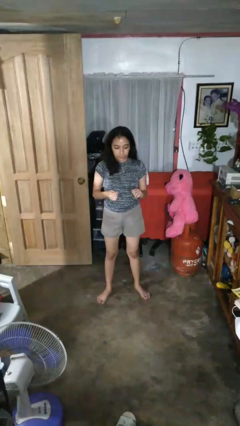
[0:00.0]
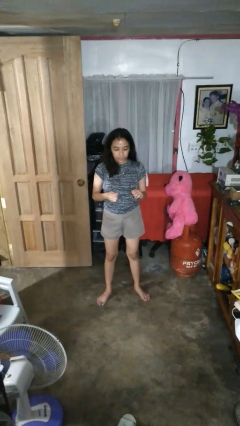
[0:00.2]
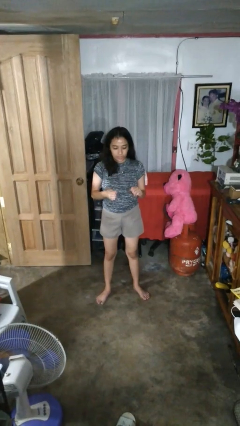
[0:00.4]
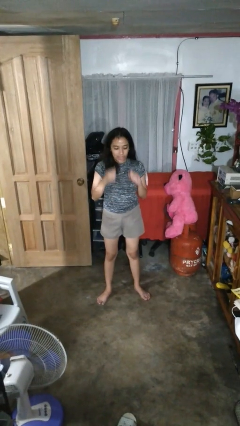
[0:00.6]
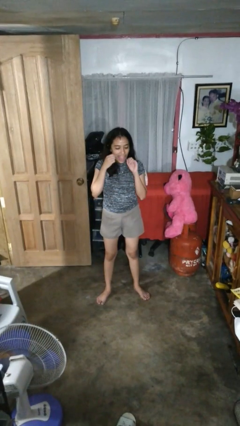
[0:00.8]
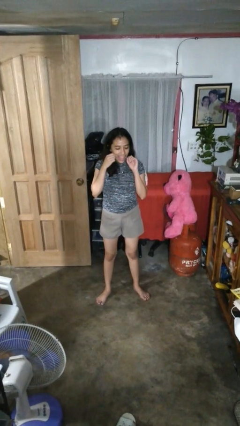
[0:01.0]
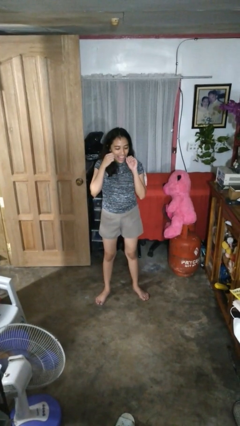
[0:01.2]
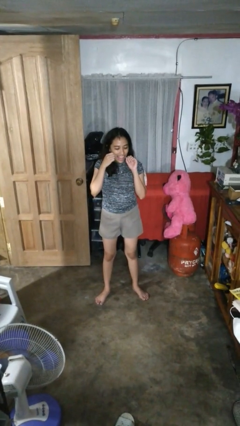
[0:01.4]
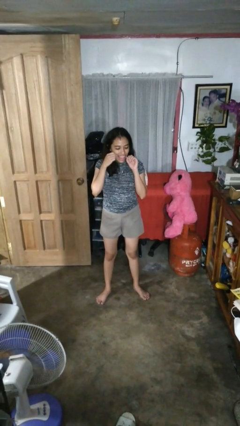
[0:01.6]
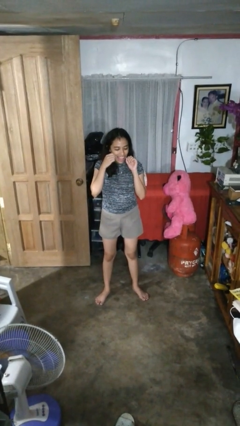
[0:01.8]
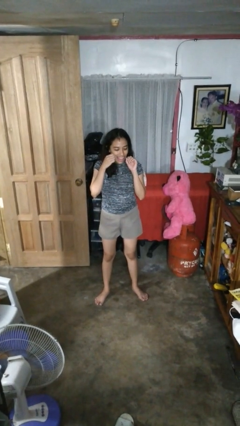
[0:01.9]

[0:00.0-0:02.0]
person flosses

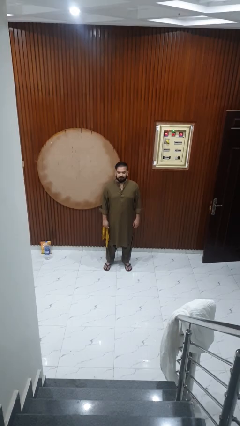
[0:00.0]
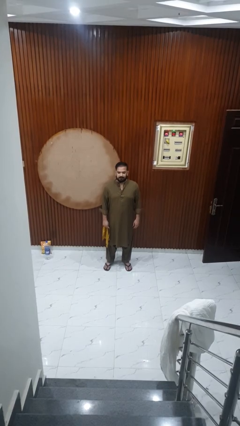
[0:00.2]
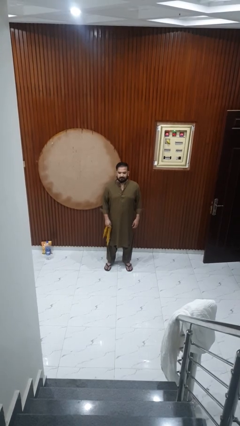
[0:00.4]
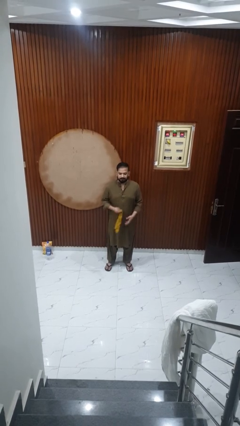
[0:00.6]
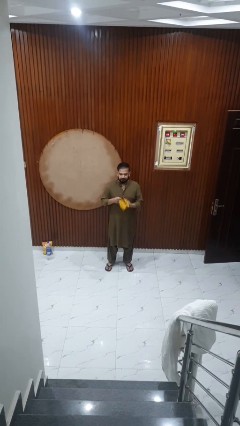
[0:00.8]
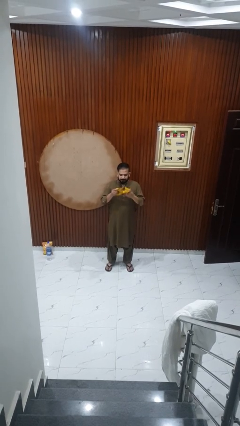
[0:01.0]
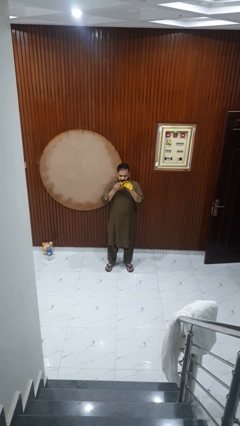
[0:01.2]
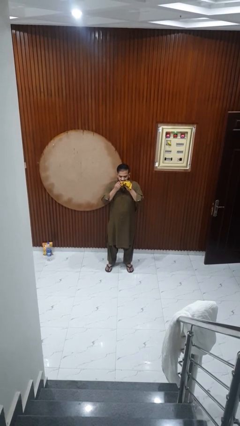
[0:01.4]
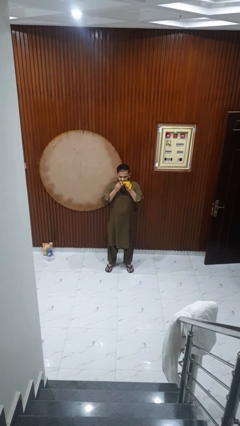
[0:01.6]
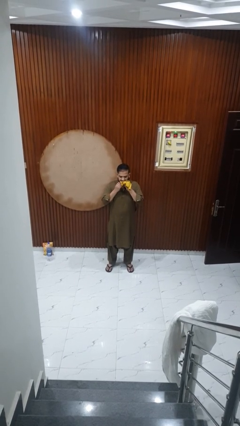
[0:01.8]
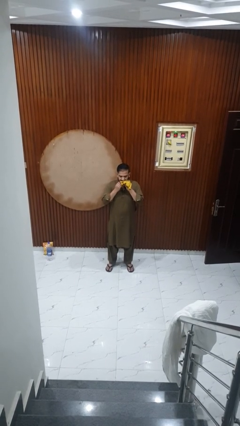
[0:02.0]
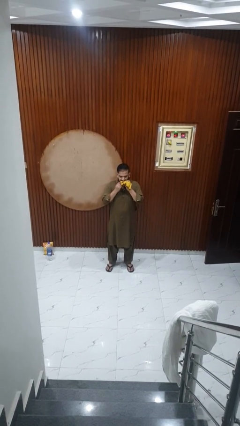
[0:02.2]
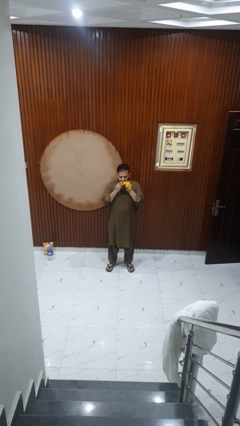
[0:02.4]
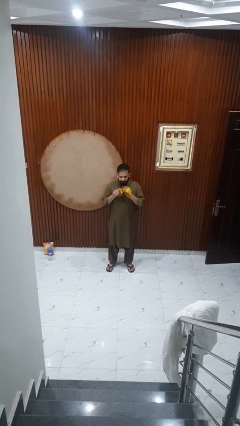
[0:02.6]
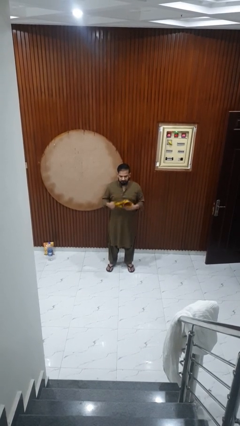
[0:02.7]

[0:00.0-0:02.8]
person wipes mouth with napkin

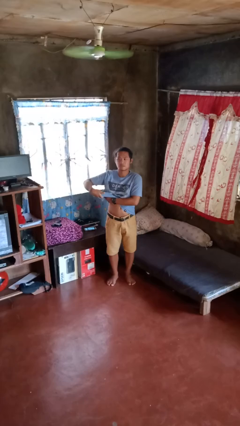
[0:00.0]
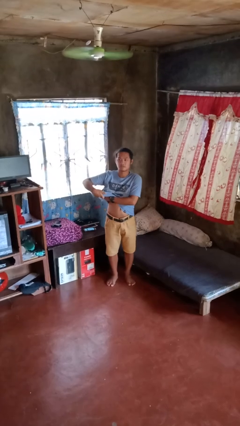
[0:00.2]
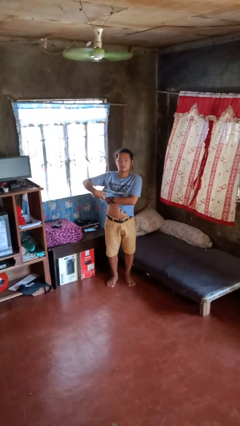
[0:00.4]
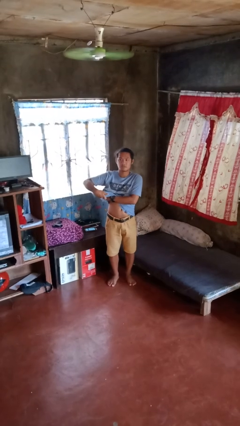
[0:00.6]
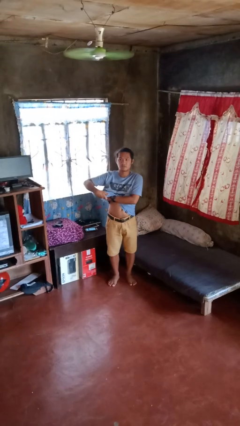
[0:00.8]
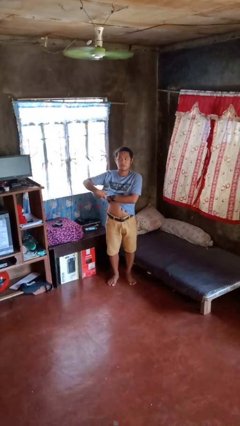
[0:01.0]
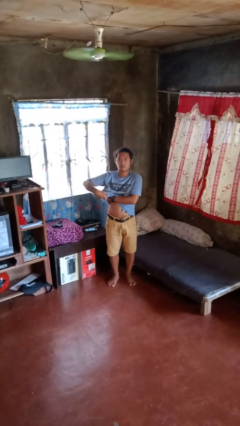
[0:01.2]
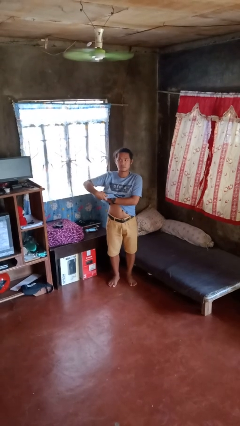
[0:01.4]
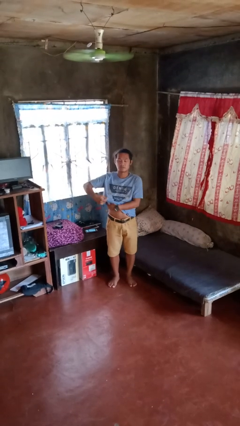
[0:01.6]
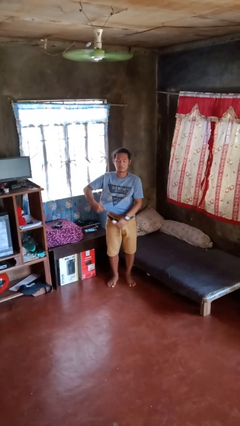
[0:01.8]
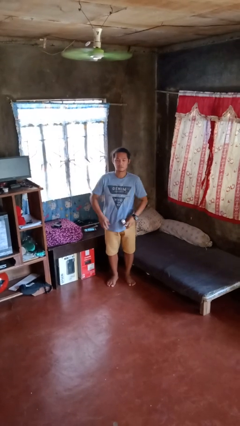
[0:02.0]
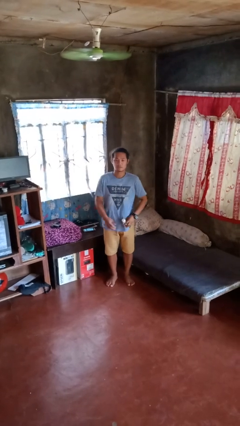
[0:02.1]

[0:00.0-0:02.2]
person applies deodorant

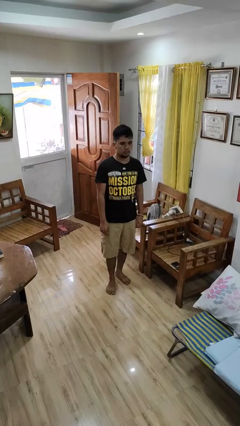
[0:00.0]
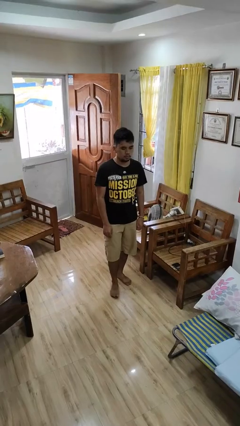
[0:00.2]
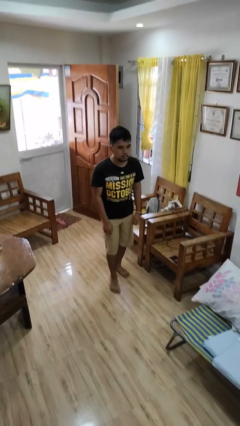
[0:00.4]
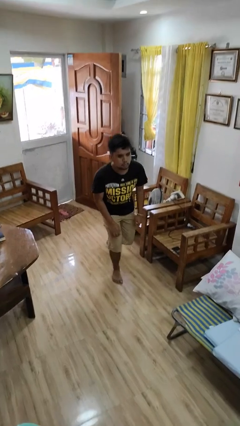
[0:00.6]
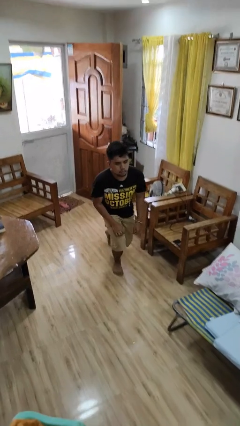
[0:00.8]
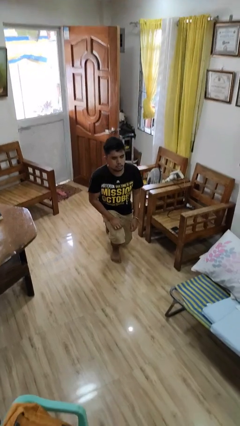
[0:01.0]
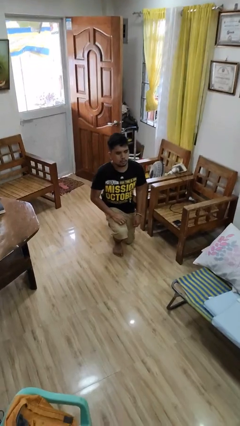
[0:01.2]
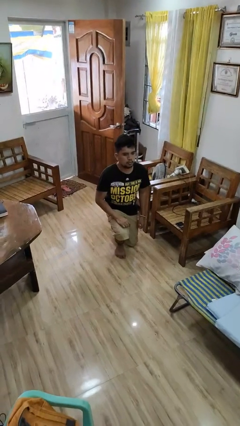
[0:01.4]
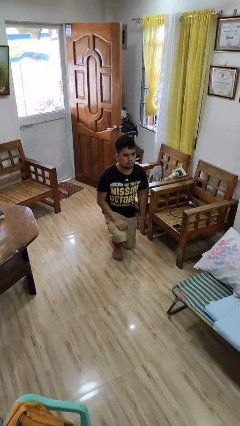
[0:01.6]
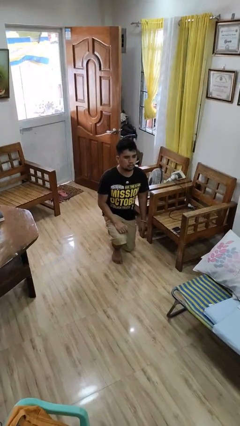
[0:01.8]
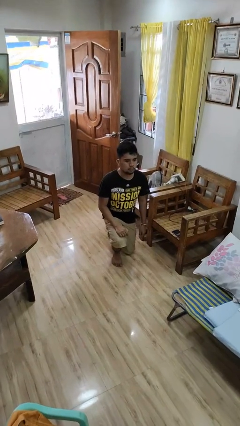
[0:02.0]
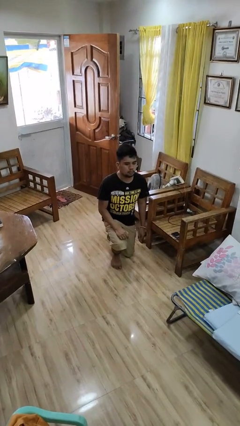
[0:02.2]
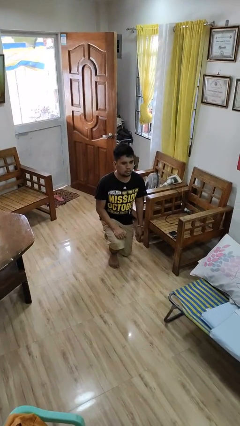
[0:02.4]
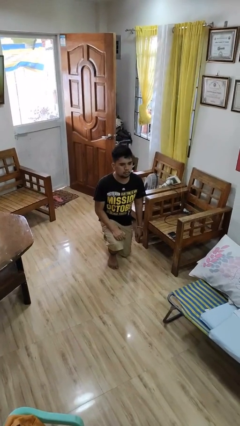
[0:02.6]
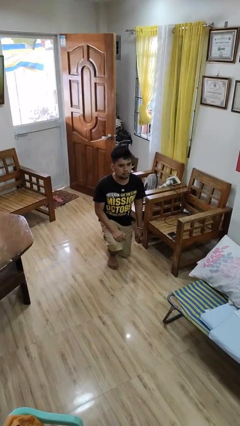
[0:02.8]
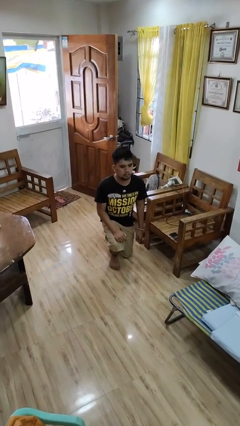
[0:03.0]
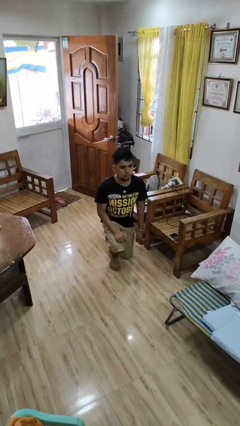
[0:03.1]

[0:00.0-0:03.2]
person kneels

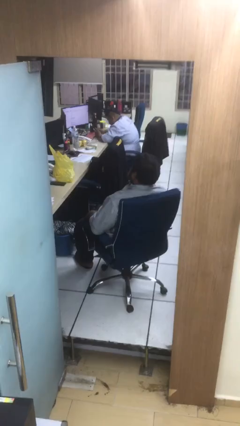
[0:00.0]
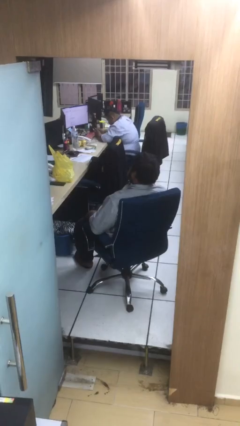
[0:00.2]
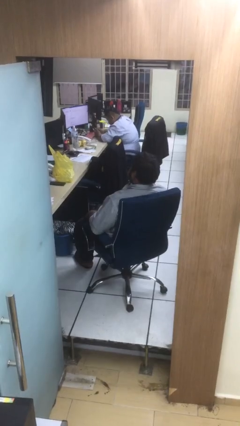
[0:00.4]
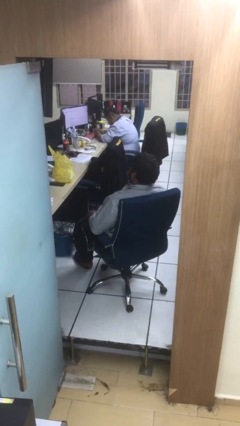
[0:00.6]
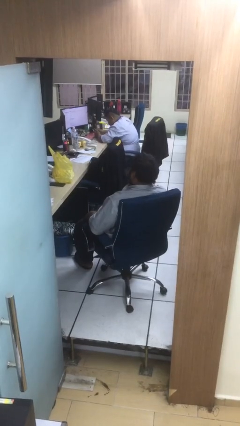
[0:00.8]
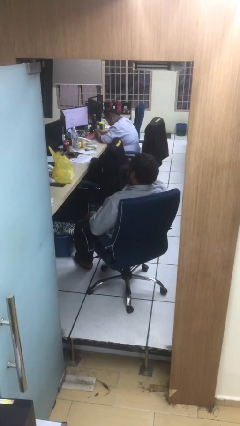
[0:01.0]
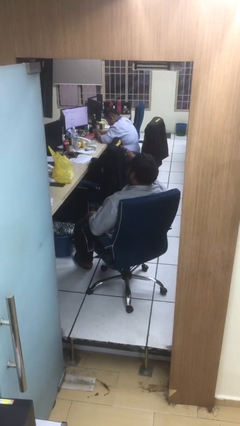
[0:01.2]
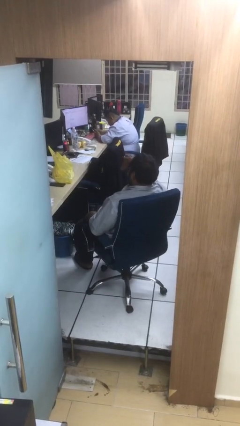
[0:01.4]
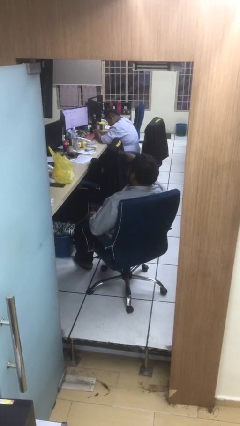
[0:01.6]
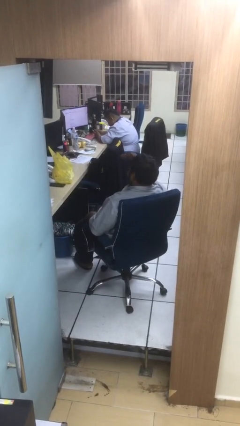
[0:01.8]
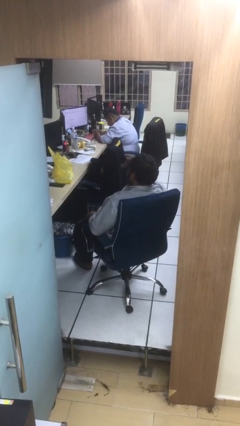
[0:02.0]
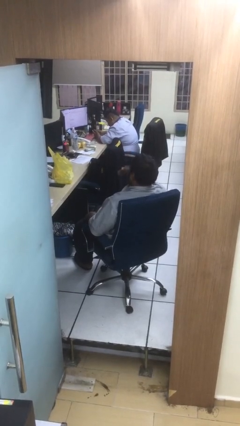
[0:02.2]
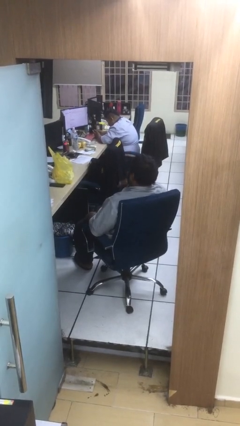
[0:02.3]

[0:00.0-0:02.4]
person gestures come here

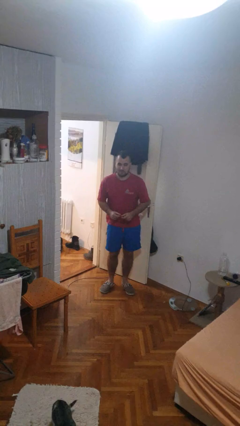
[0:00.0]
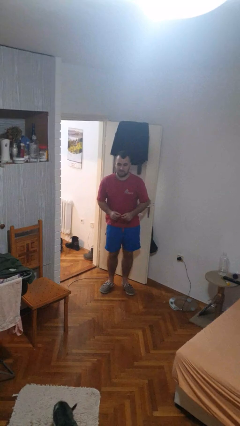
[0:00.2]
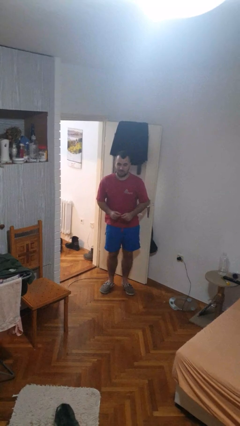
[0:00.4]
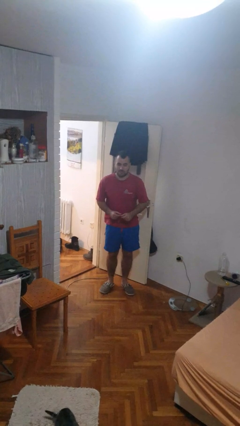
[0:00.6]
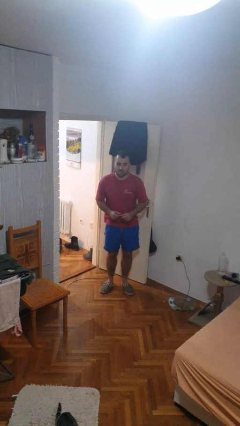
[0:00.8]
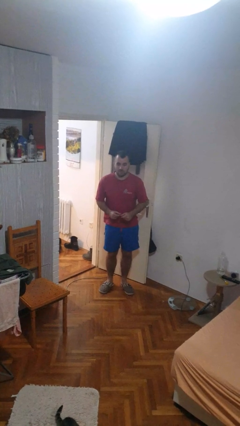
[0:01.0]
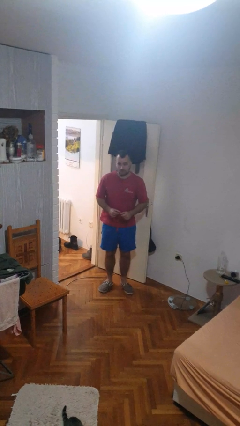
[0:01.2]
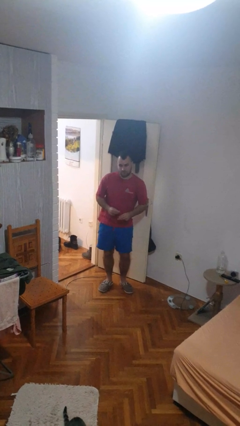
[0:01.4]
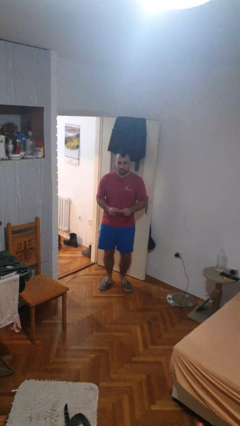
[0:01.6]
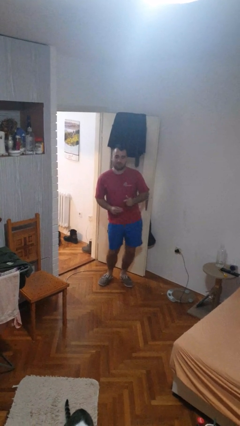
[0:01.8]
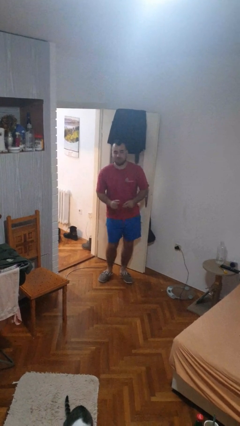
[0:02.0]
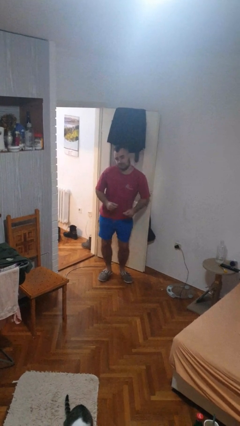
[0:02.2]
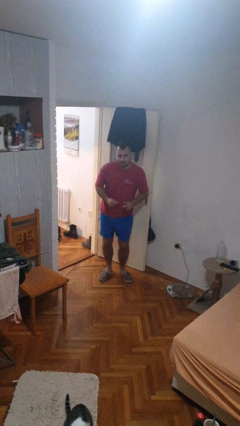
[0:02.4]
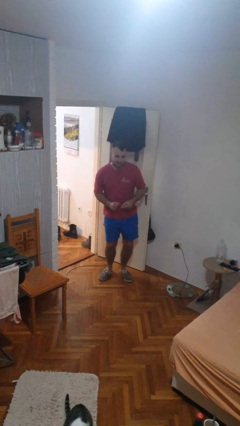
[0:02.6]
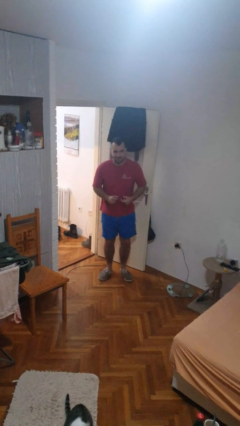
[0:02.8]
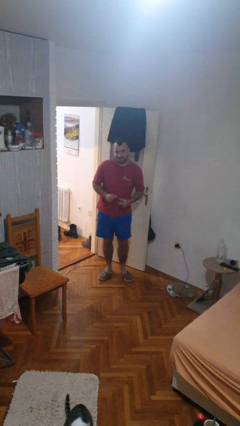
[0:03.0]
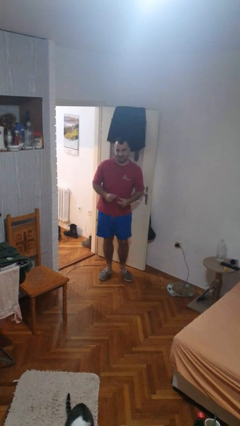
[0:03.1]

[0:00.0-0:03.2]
person dances in place

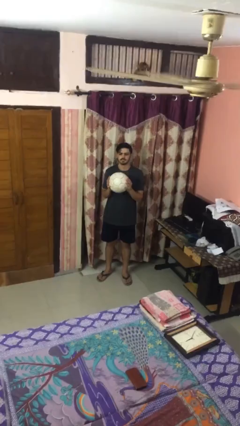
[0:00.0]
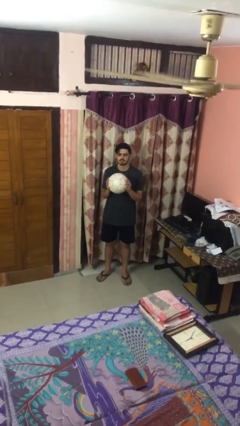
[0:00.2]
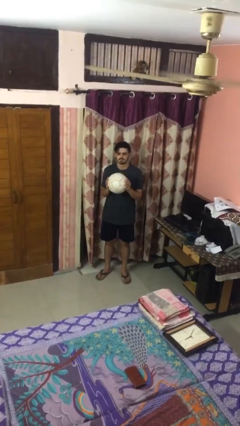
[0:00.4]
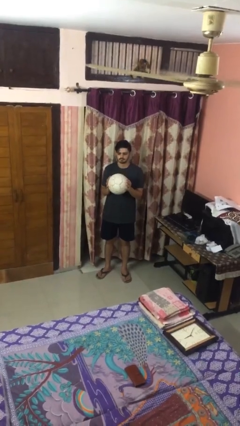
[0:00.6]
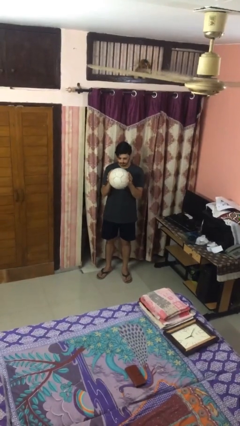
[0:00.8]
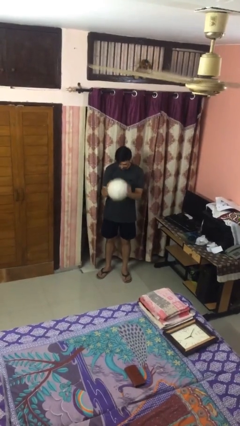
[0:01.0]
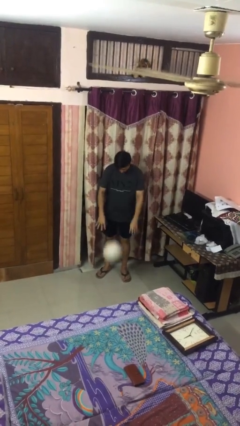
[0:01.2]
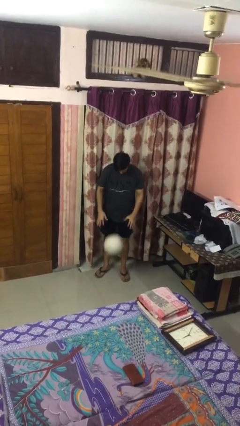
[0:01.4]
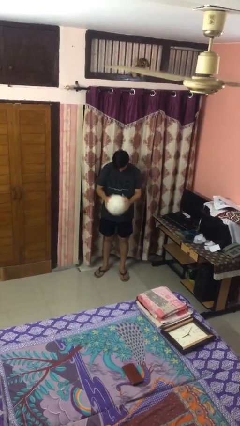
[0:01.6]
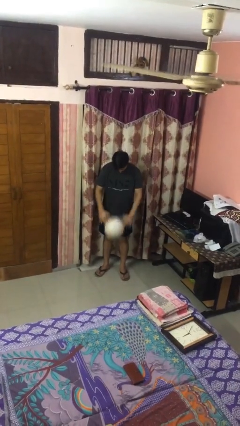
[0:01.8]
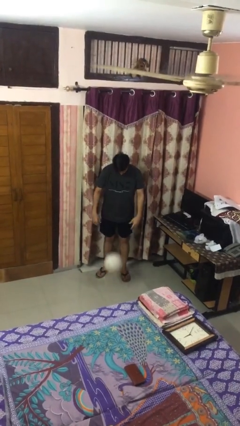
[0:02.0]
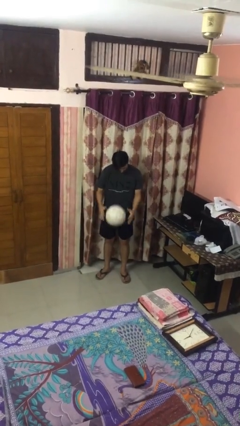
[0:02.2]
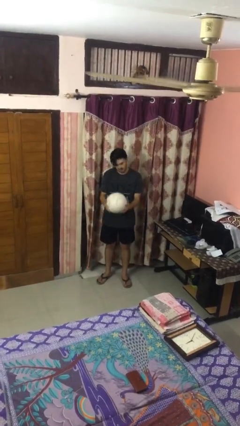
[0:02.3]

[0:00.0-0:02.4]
person bounces ball on floor
